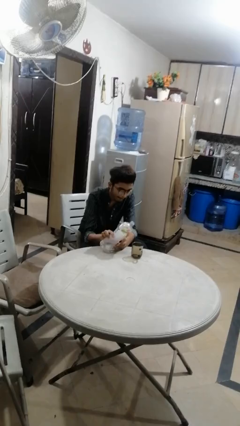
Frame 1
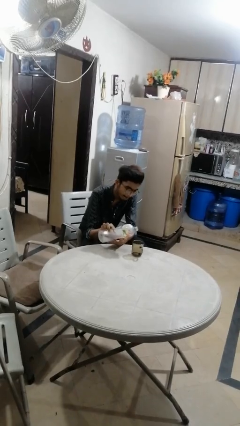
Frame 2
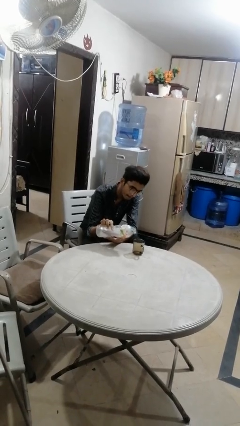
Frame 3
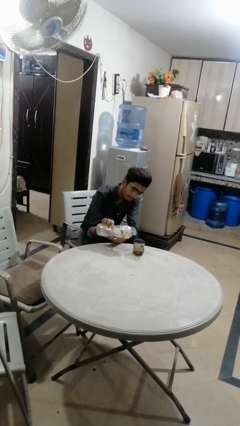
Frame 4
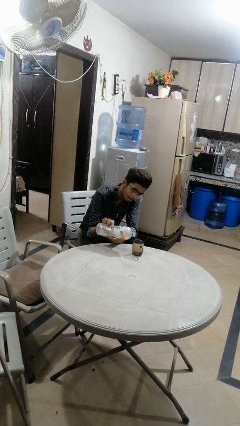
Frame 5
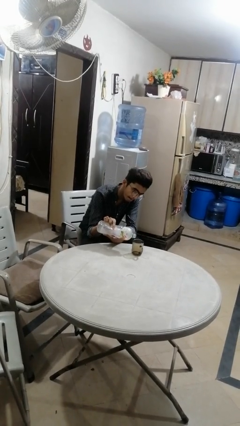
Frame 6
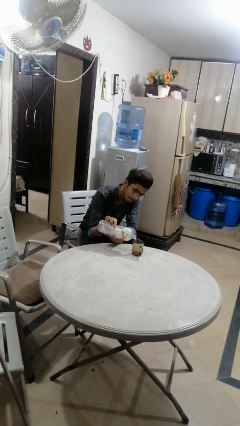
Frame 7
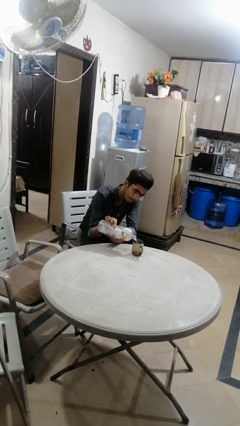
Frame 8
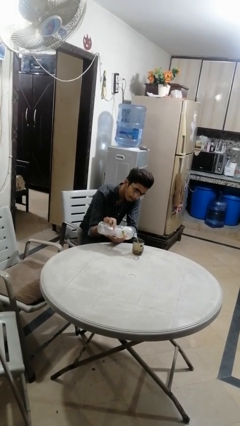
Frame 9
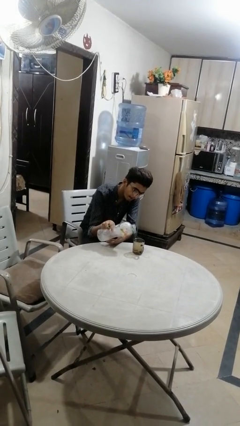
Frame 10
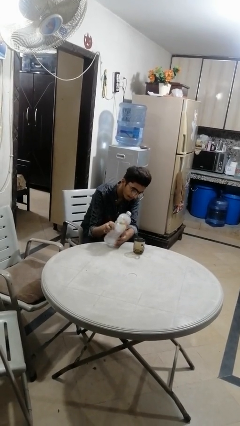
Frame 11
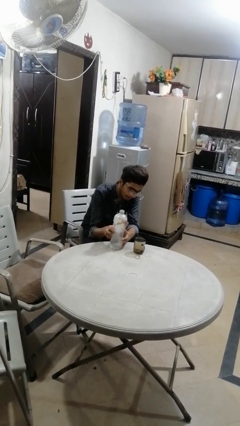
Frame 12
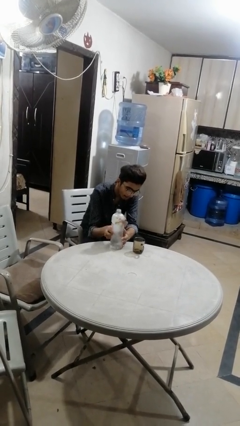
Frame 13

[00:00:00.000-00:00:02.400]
person pours liquid into cup

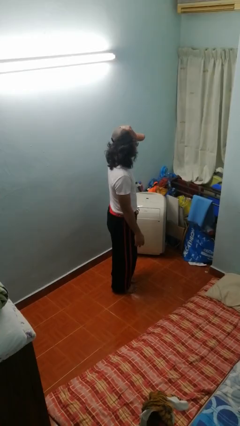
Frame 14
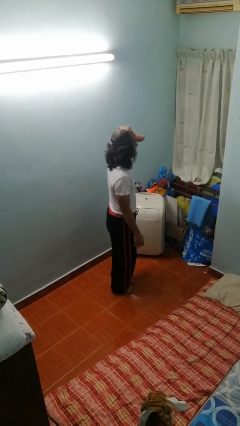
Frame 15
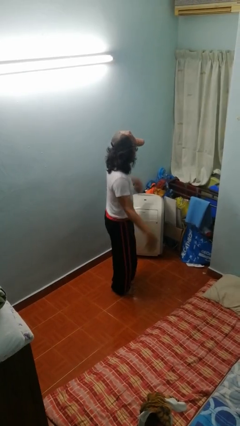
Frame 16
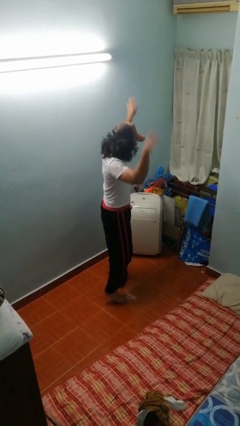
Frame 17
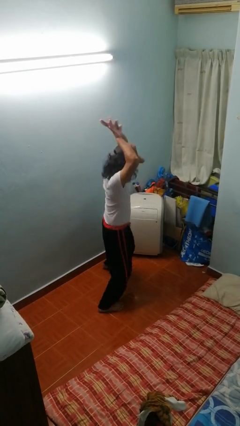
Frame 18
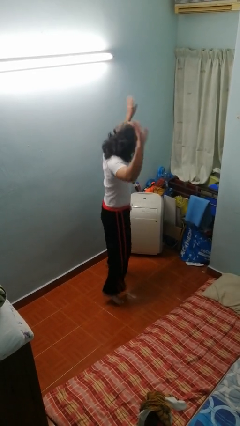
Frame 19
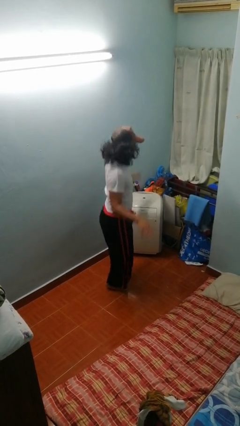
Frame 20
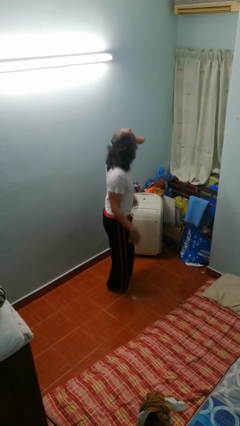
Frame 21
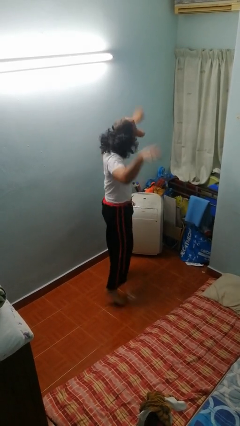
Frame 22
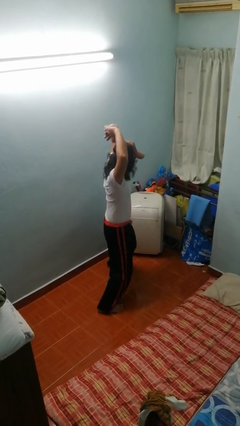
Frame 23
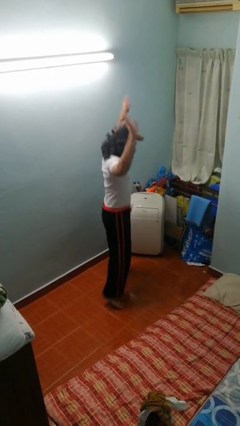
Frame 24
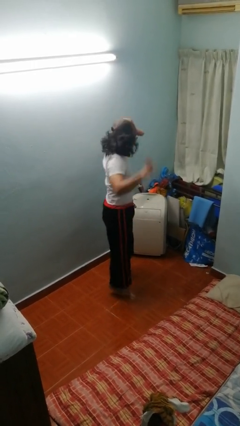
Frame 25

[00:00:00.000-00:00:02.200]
person exercises with jumping jacks

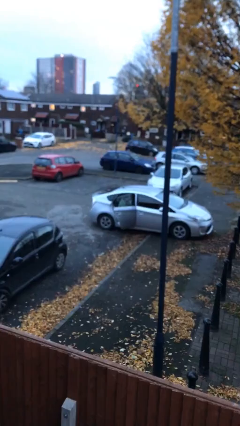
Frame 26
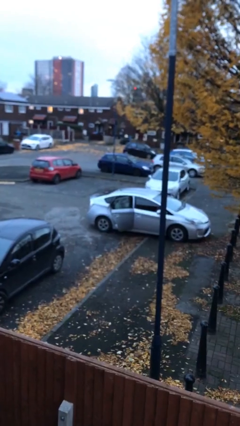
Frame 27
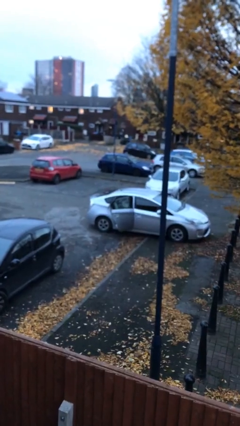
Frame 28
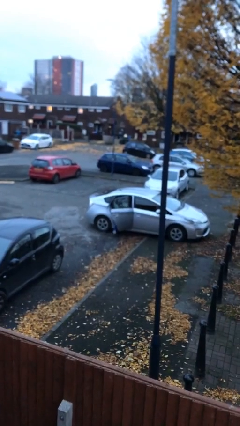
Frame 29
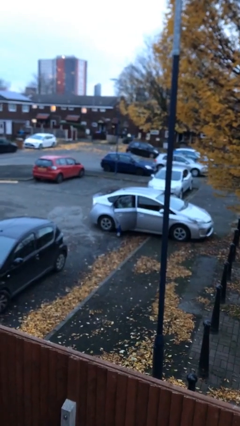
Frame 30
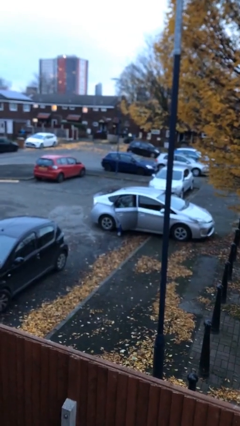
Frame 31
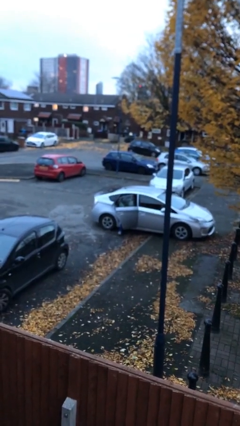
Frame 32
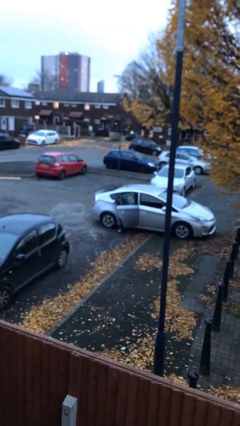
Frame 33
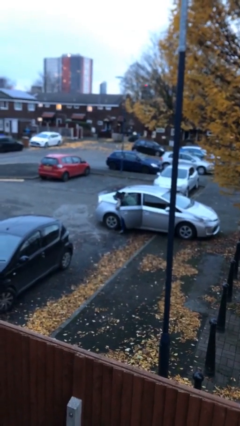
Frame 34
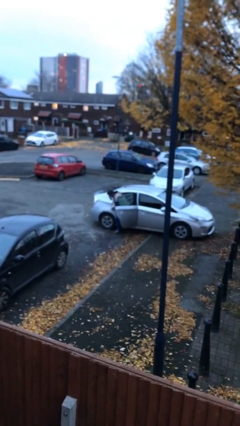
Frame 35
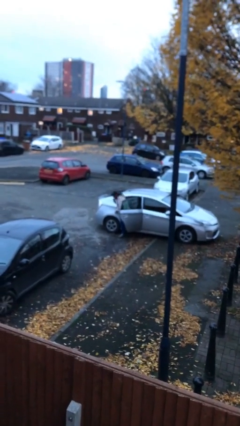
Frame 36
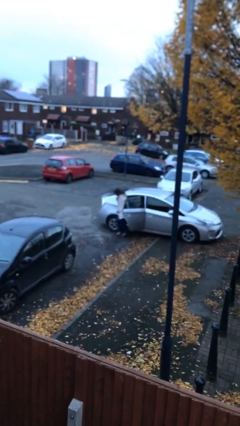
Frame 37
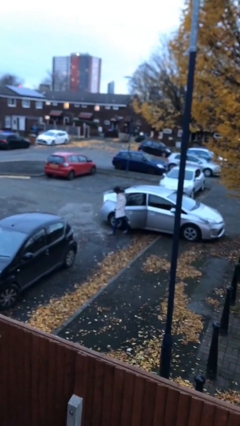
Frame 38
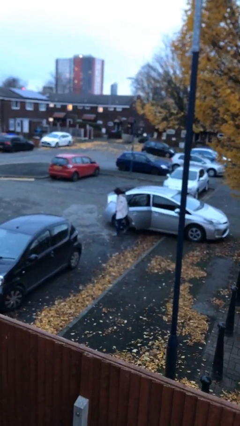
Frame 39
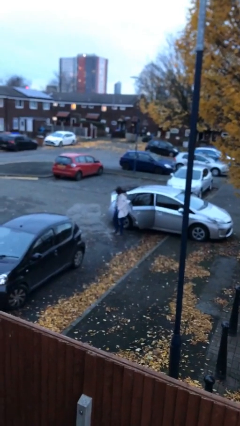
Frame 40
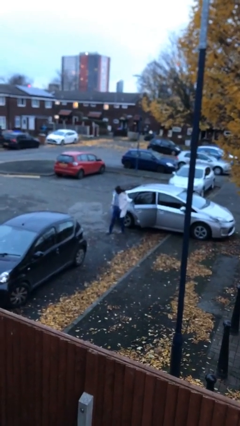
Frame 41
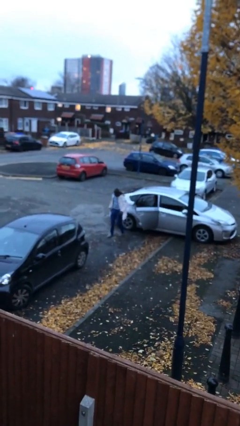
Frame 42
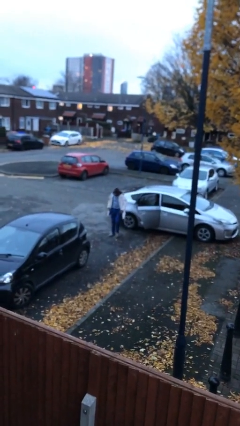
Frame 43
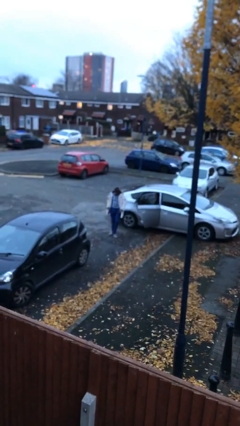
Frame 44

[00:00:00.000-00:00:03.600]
person exits car

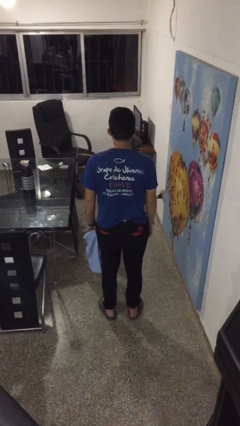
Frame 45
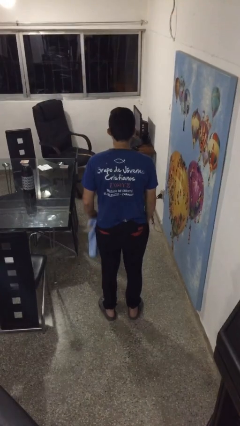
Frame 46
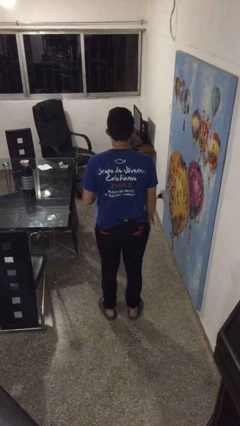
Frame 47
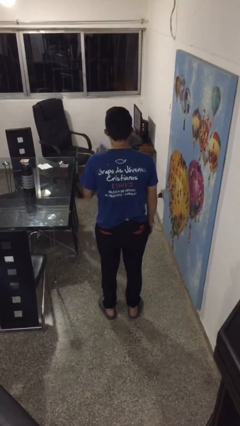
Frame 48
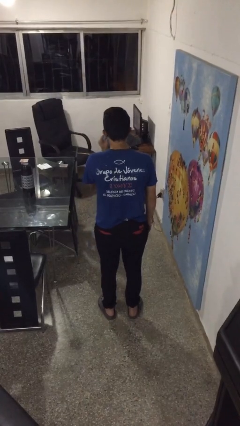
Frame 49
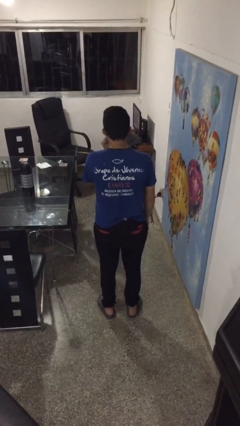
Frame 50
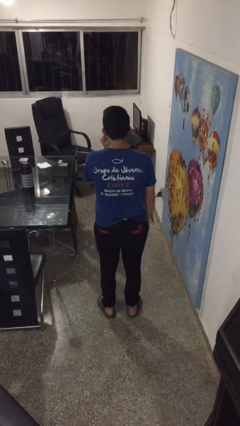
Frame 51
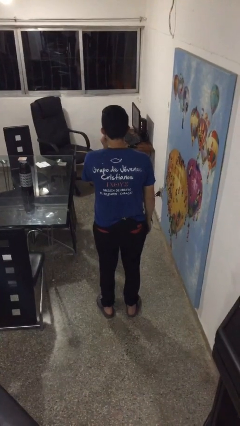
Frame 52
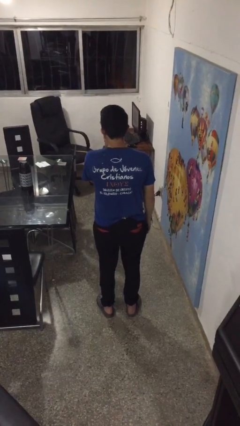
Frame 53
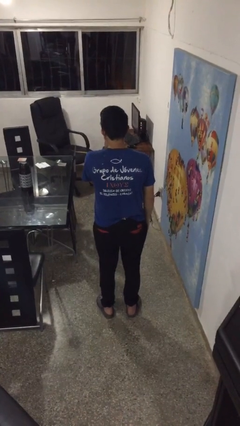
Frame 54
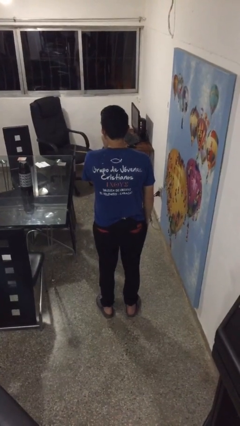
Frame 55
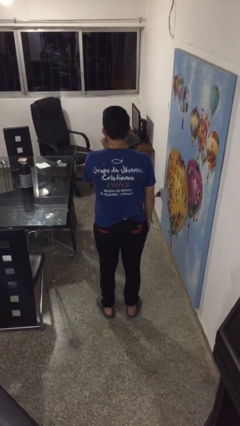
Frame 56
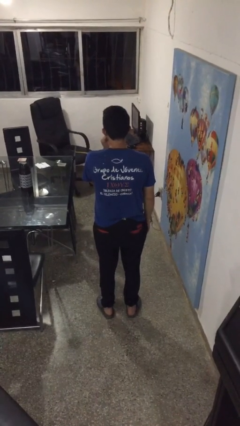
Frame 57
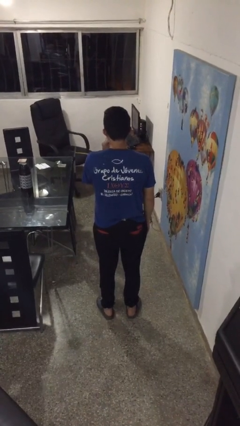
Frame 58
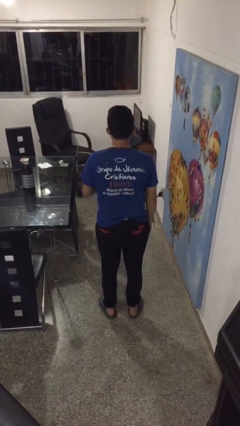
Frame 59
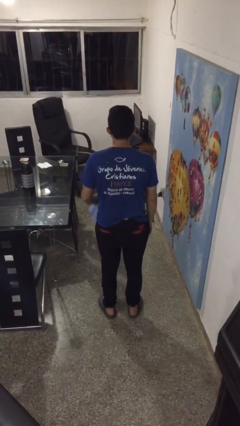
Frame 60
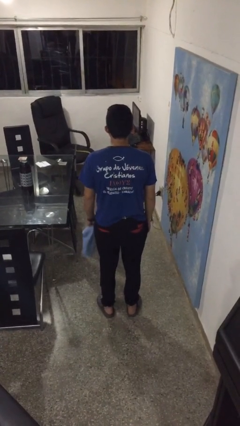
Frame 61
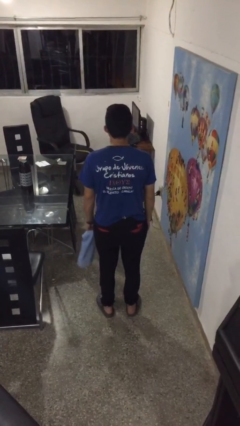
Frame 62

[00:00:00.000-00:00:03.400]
person wipes mouth with napkin

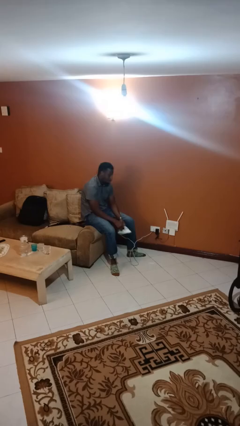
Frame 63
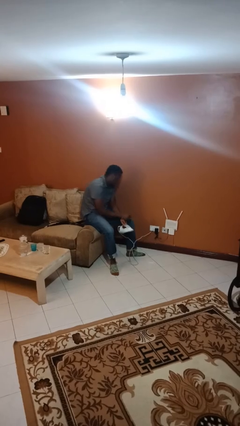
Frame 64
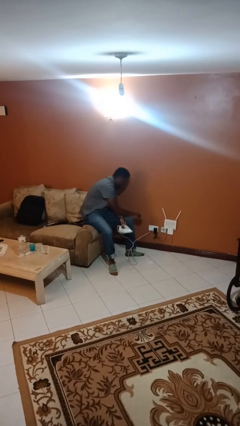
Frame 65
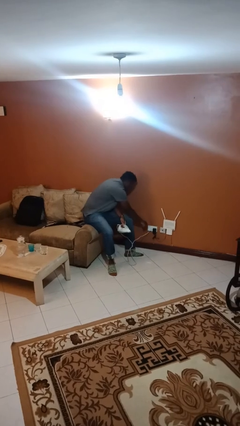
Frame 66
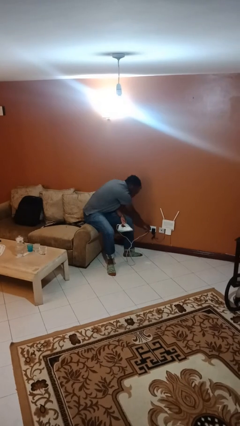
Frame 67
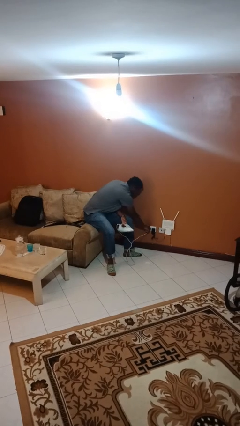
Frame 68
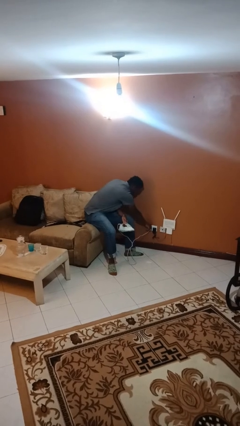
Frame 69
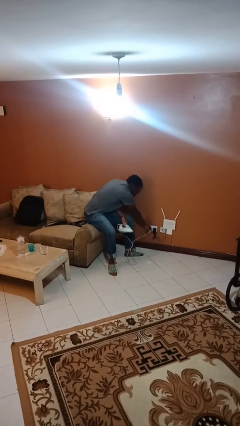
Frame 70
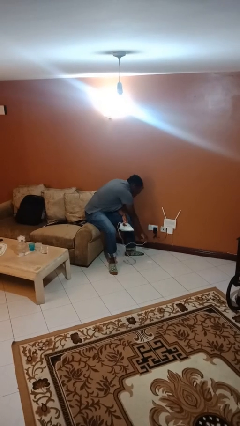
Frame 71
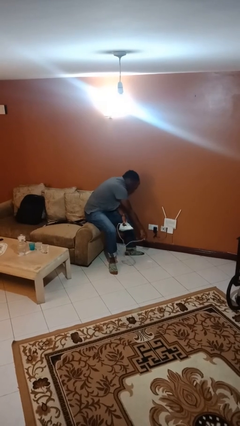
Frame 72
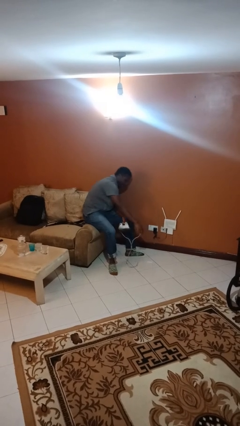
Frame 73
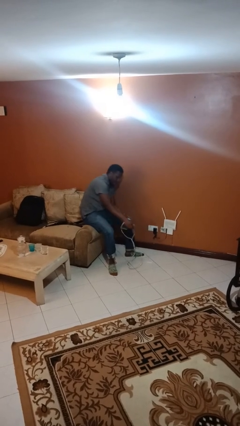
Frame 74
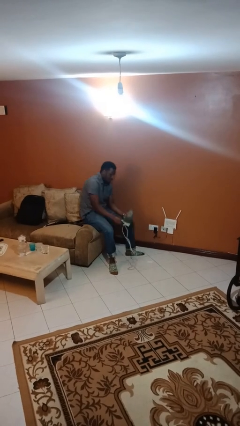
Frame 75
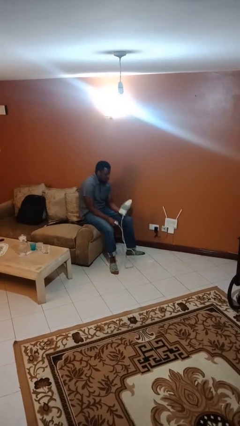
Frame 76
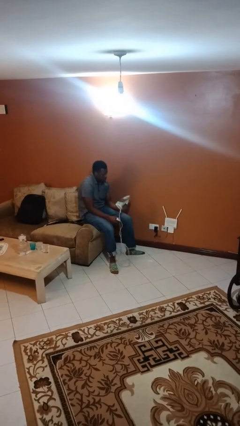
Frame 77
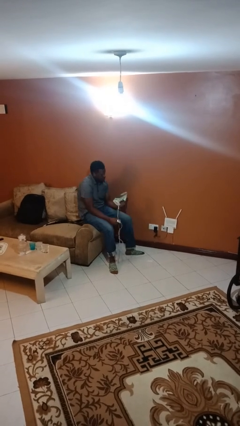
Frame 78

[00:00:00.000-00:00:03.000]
person unplugs from electrical socket

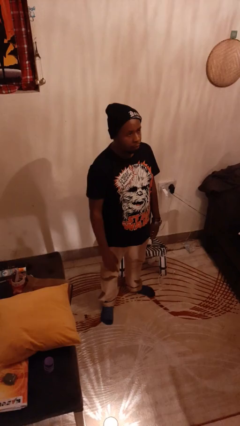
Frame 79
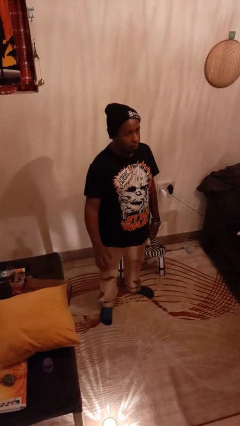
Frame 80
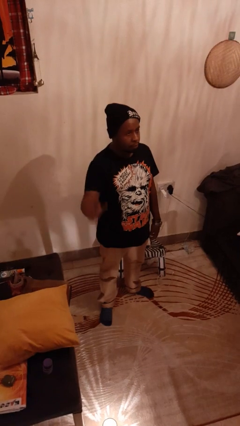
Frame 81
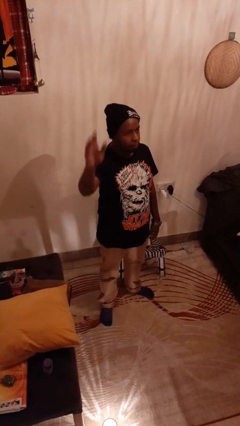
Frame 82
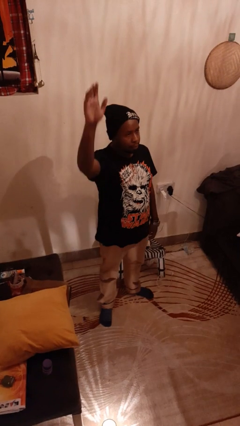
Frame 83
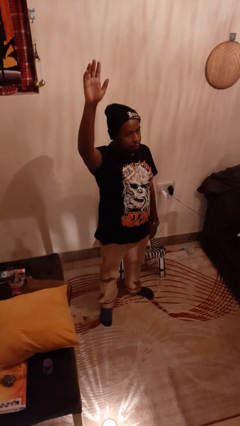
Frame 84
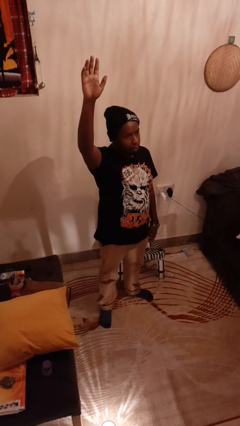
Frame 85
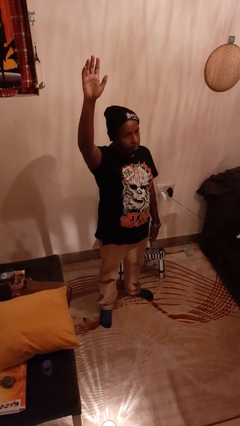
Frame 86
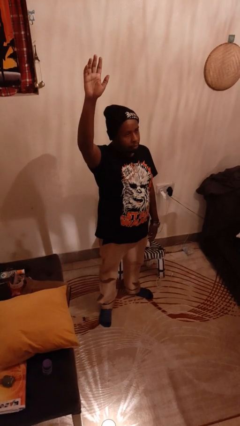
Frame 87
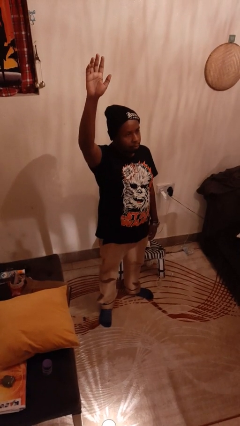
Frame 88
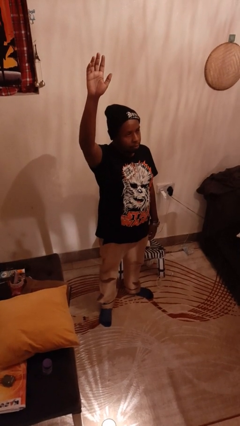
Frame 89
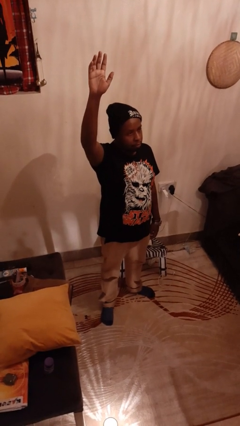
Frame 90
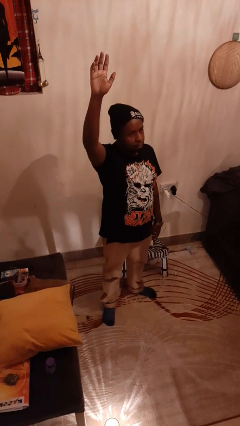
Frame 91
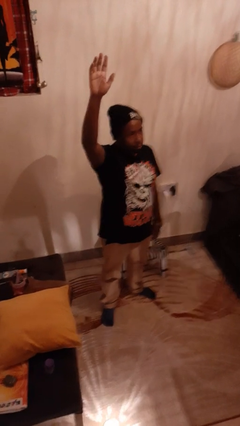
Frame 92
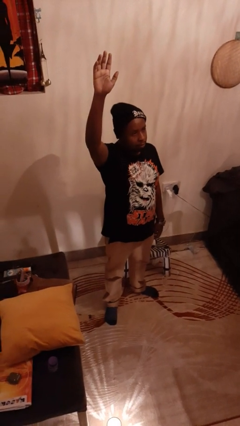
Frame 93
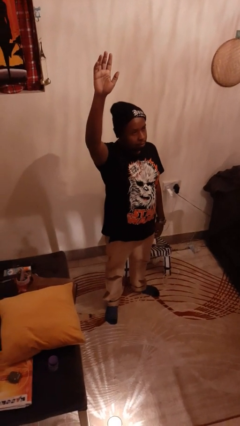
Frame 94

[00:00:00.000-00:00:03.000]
person gestures lower hand
